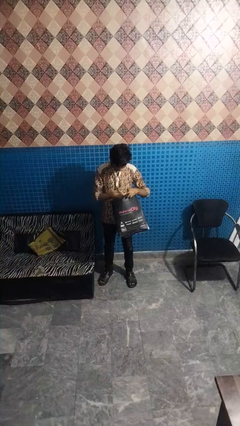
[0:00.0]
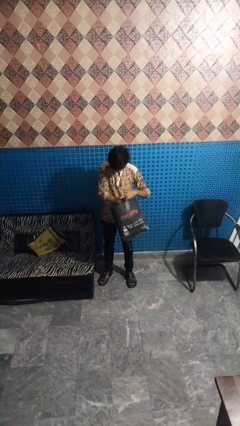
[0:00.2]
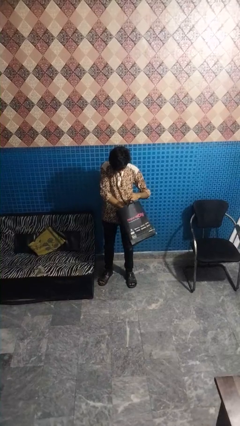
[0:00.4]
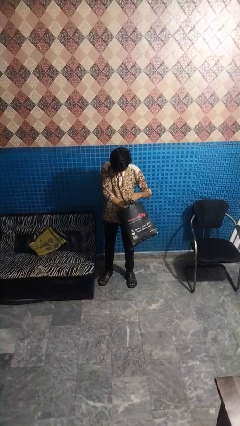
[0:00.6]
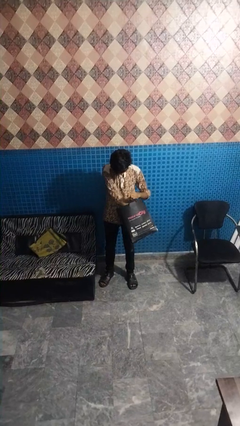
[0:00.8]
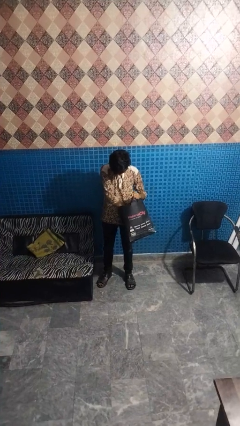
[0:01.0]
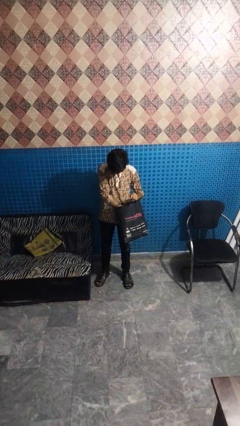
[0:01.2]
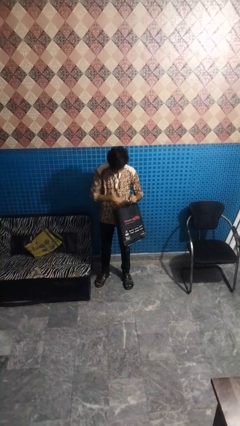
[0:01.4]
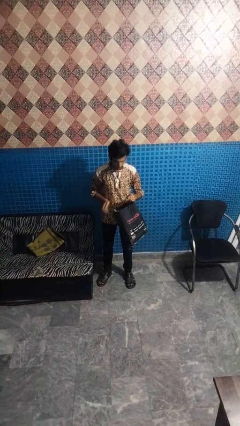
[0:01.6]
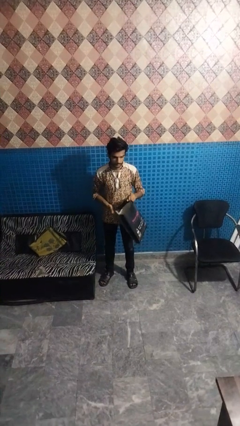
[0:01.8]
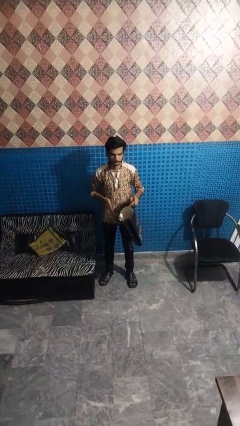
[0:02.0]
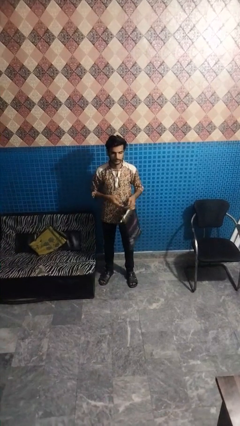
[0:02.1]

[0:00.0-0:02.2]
person searches in bag

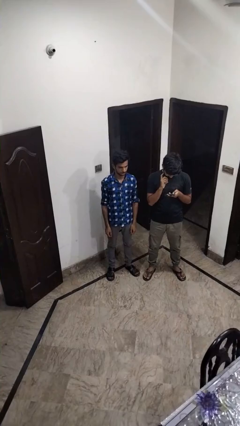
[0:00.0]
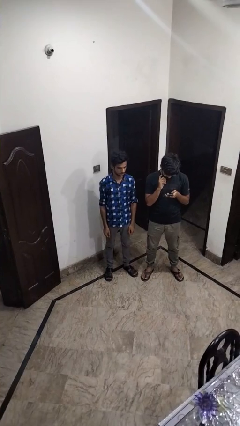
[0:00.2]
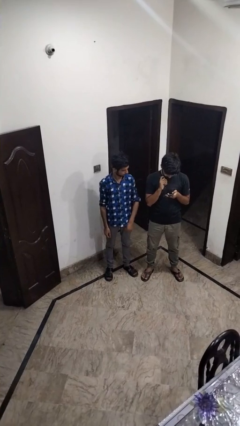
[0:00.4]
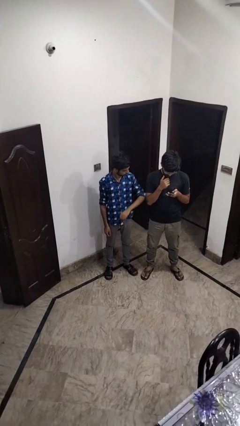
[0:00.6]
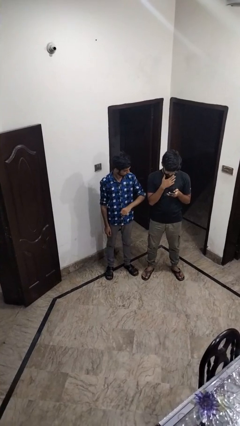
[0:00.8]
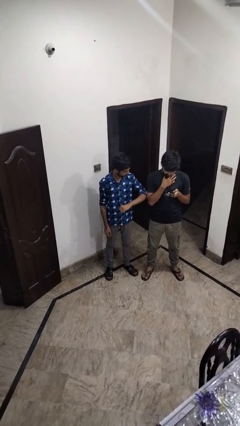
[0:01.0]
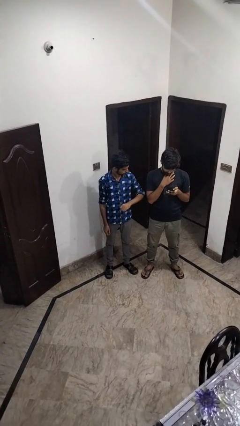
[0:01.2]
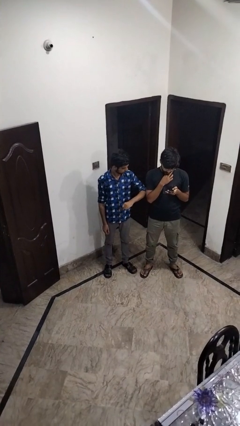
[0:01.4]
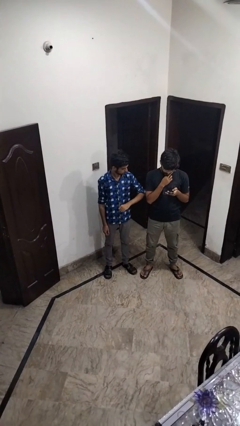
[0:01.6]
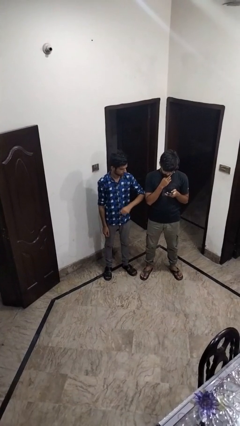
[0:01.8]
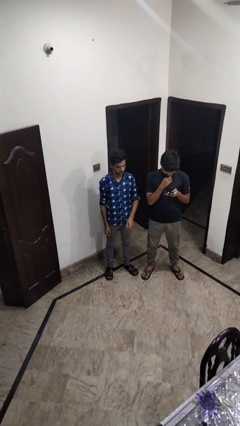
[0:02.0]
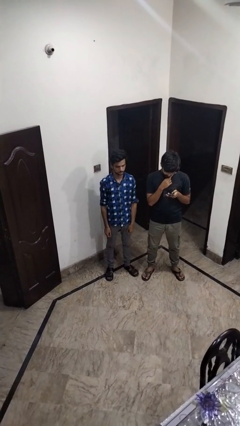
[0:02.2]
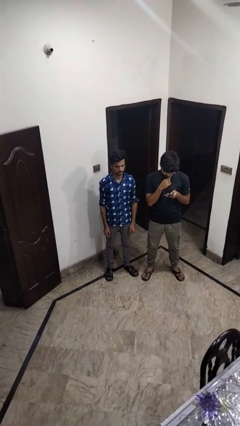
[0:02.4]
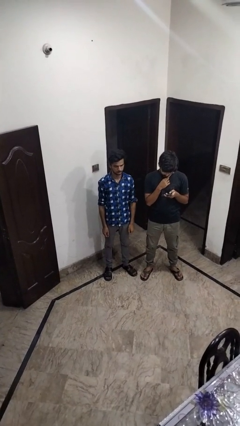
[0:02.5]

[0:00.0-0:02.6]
person nudges person with elbow

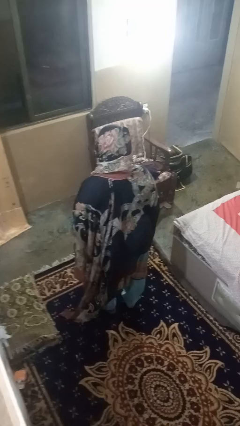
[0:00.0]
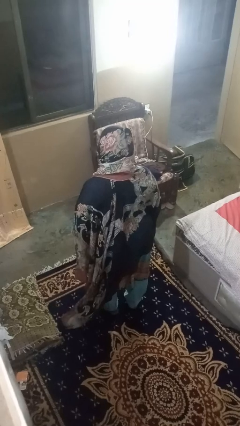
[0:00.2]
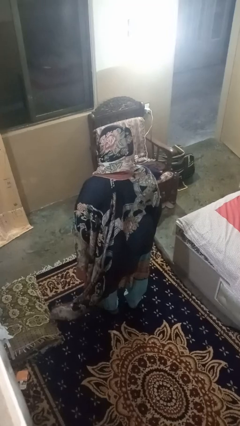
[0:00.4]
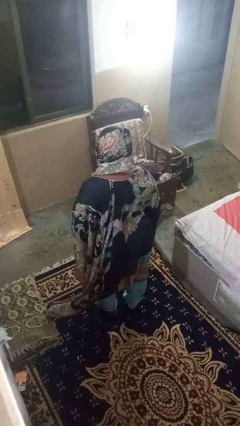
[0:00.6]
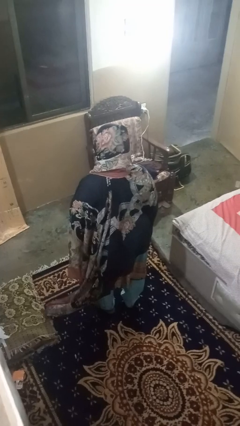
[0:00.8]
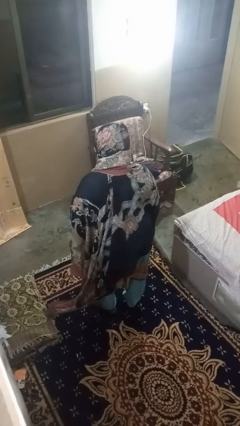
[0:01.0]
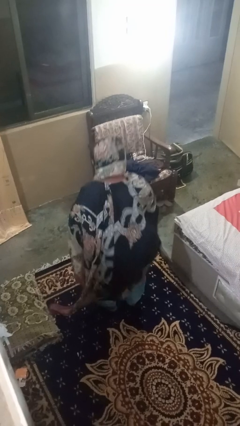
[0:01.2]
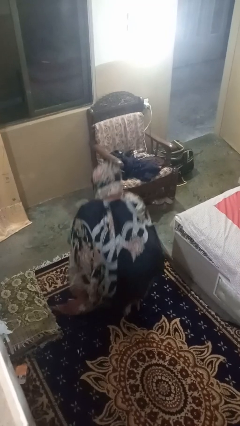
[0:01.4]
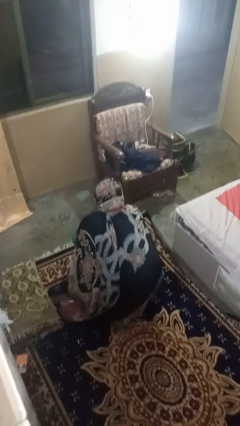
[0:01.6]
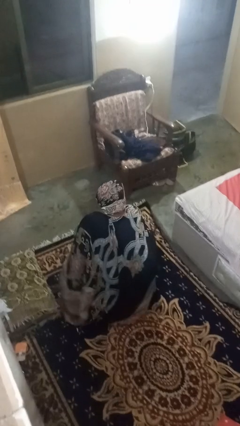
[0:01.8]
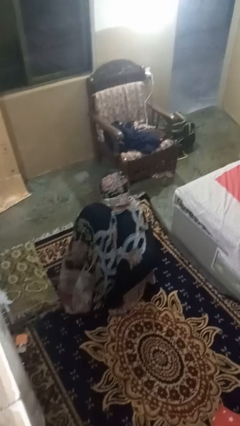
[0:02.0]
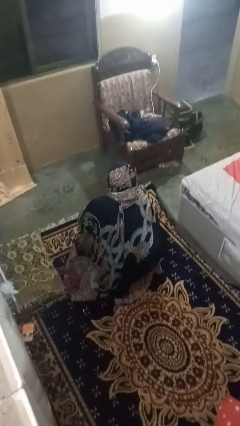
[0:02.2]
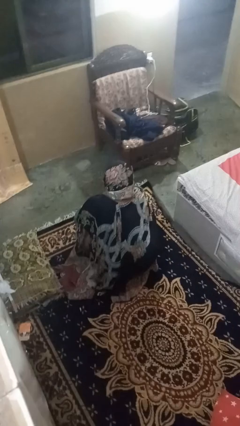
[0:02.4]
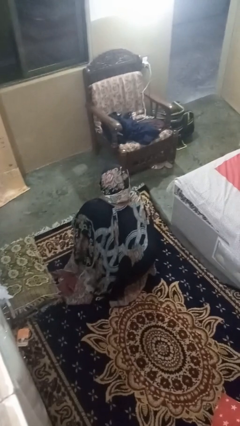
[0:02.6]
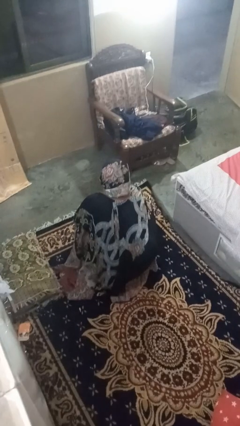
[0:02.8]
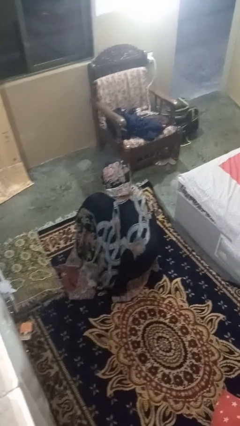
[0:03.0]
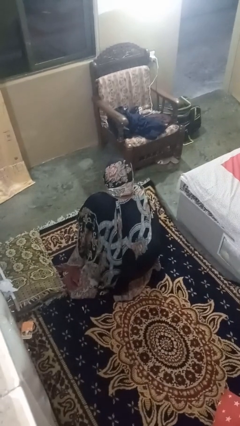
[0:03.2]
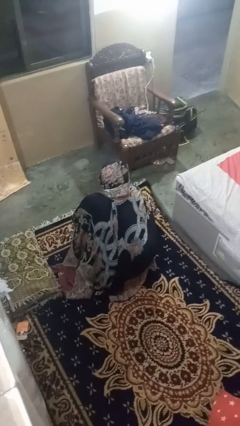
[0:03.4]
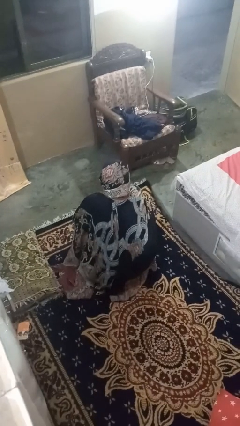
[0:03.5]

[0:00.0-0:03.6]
person squats

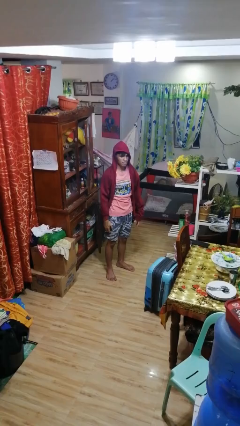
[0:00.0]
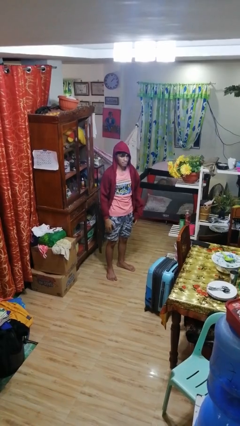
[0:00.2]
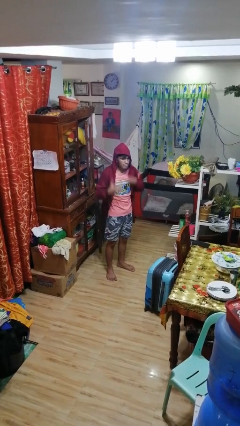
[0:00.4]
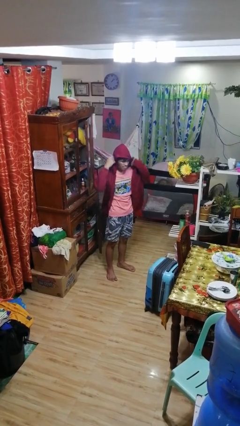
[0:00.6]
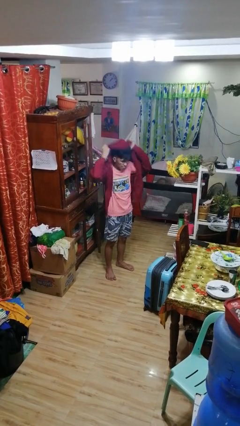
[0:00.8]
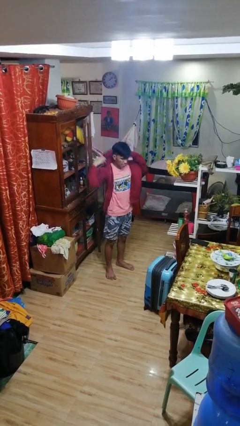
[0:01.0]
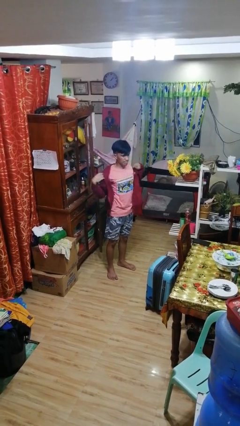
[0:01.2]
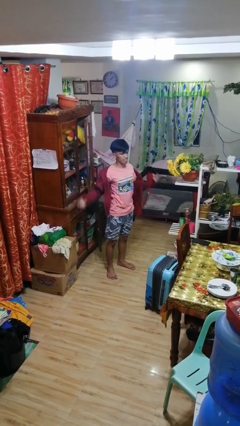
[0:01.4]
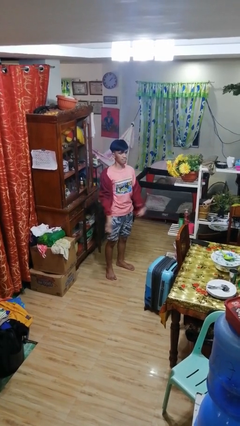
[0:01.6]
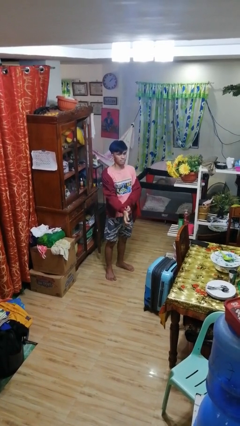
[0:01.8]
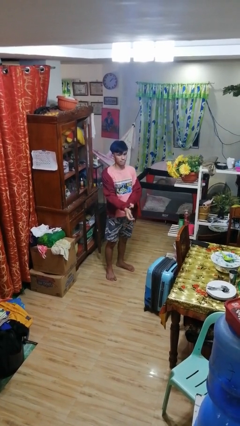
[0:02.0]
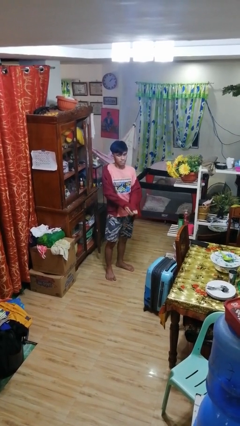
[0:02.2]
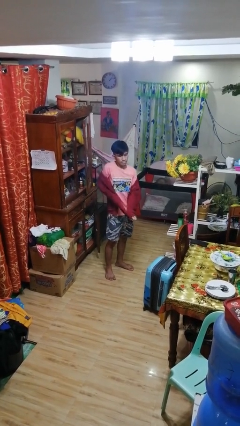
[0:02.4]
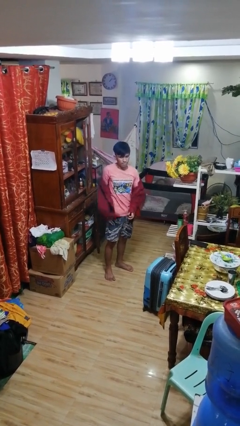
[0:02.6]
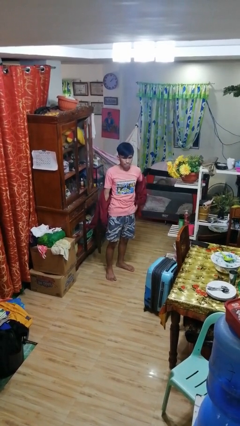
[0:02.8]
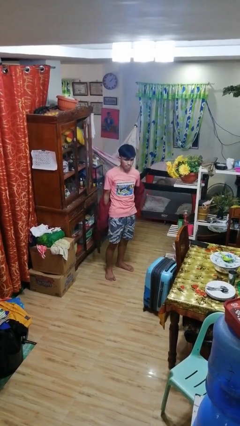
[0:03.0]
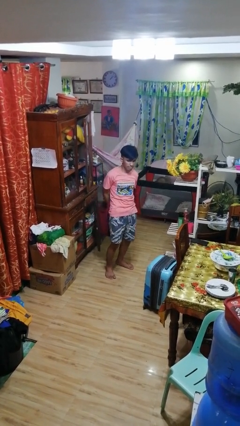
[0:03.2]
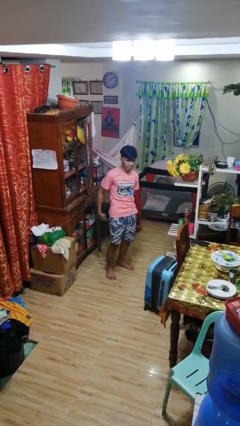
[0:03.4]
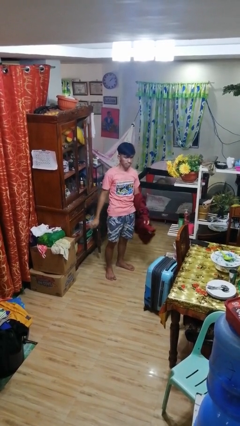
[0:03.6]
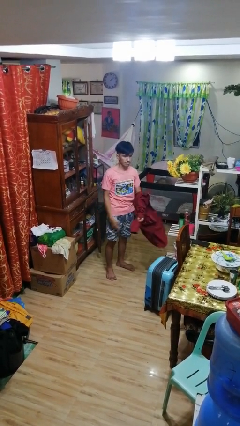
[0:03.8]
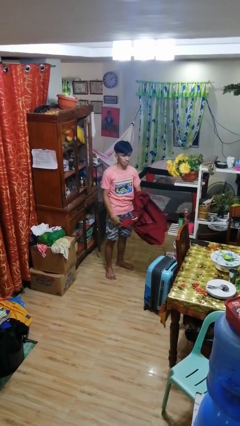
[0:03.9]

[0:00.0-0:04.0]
person takes off hoodie

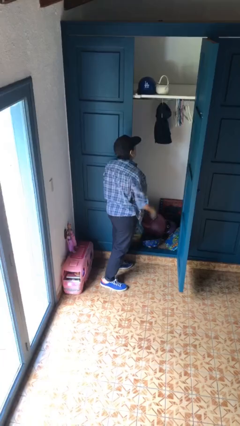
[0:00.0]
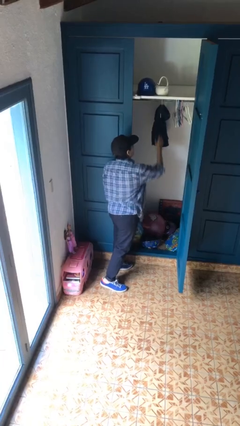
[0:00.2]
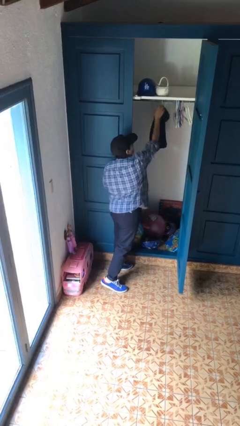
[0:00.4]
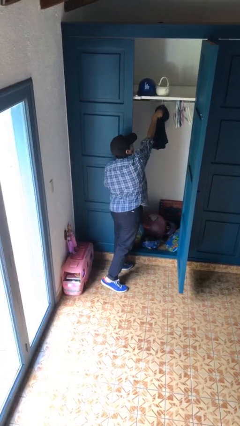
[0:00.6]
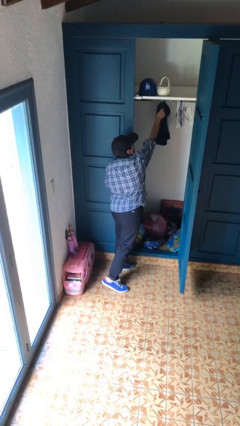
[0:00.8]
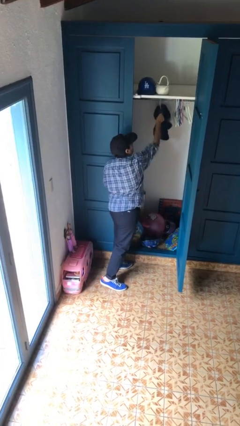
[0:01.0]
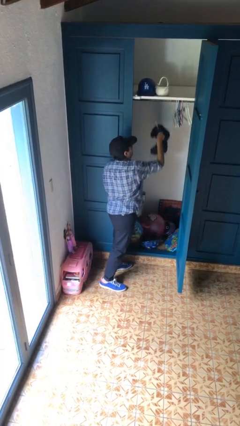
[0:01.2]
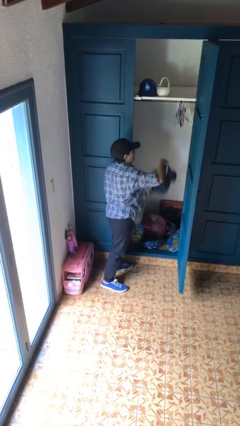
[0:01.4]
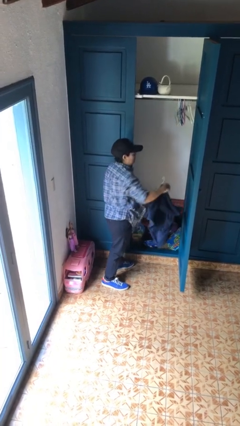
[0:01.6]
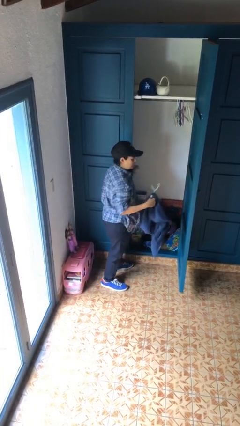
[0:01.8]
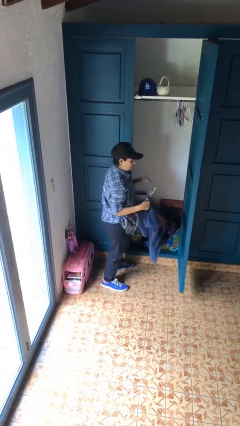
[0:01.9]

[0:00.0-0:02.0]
person takes clothes from closet

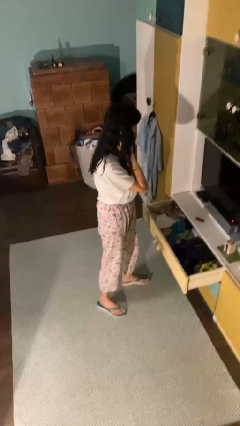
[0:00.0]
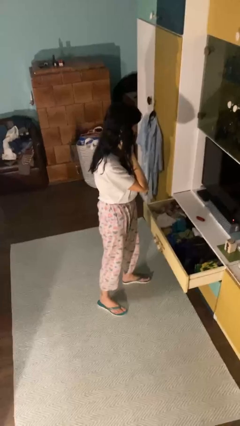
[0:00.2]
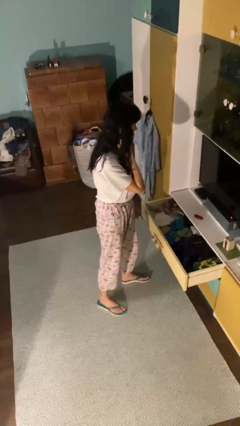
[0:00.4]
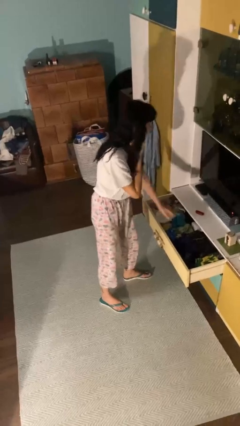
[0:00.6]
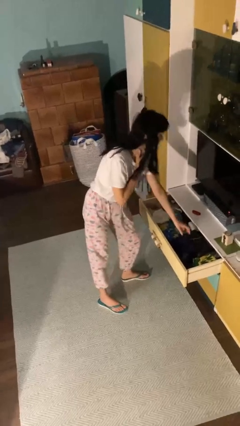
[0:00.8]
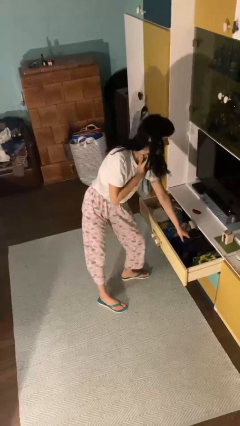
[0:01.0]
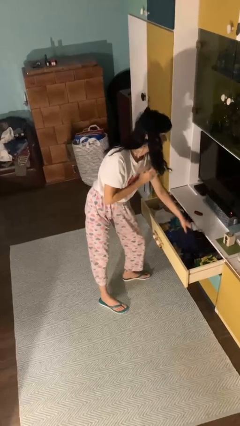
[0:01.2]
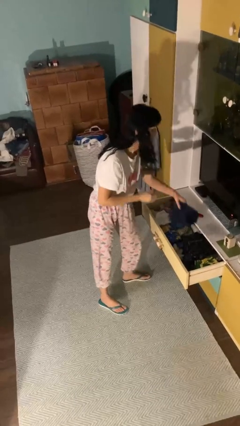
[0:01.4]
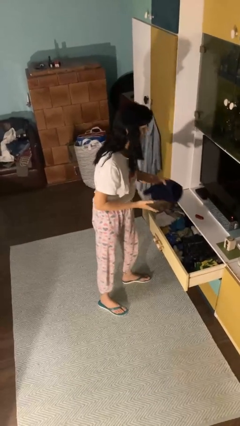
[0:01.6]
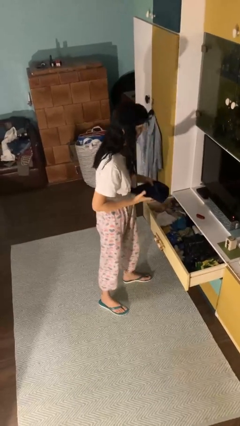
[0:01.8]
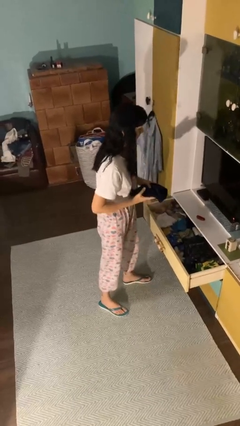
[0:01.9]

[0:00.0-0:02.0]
person takes clothes from dresser

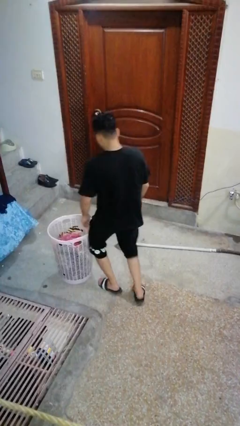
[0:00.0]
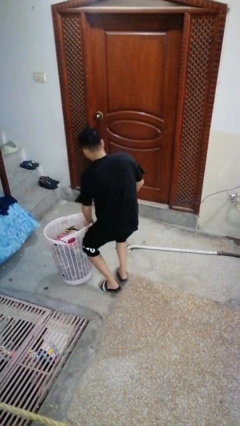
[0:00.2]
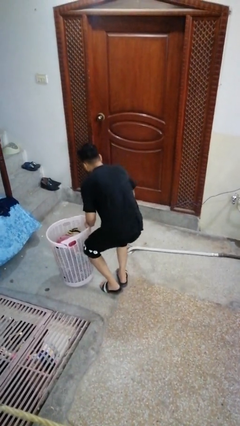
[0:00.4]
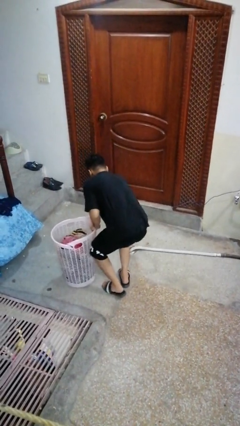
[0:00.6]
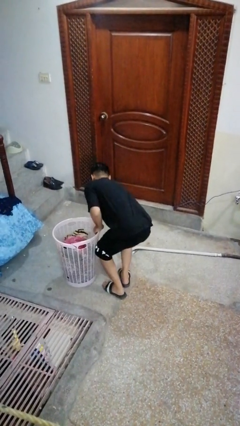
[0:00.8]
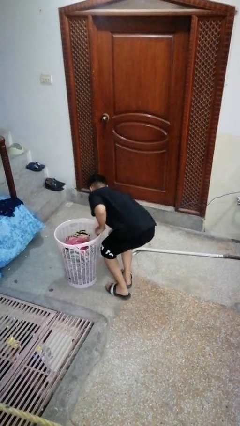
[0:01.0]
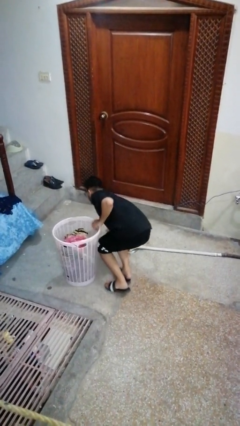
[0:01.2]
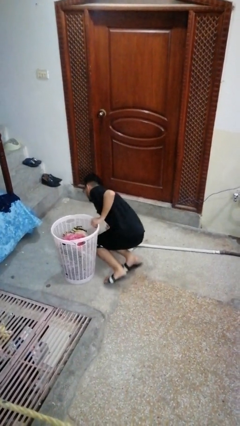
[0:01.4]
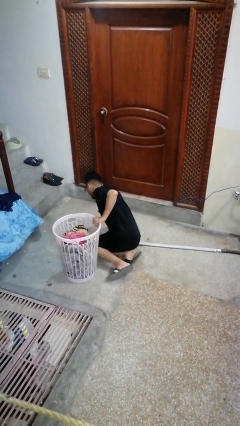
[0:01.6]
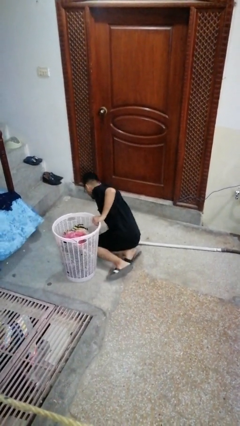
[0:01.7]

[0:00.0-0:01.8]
person trips on object on floor
